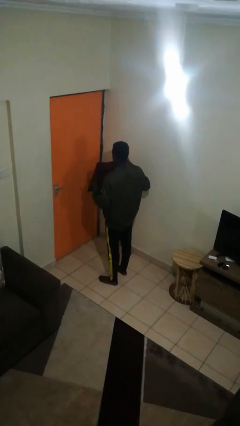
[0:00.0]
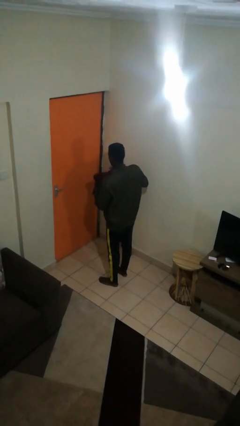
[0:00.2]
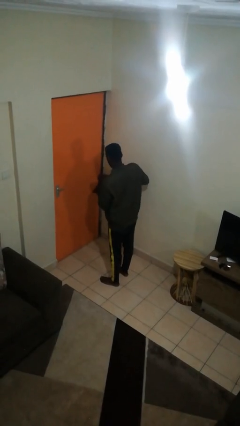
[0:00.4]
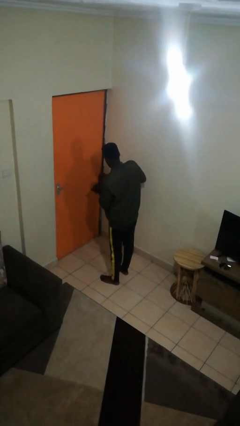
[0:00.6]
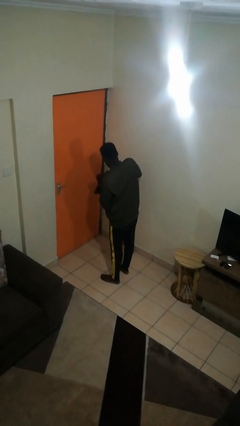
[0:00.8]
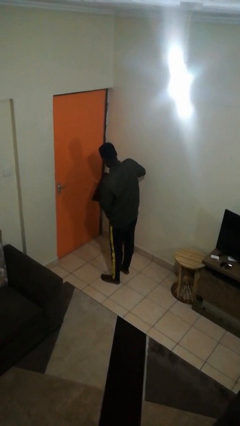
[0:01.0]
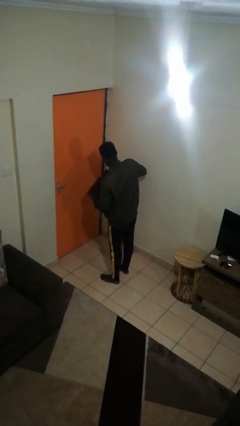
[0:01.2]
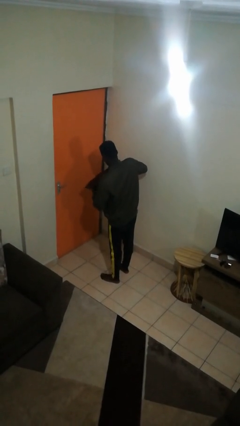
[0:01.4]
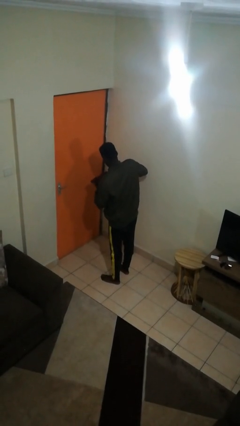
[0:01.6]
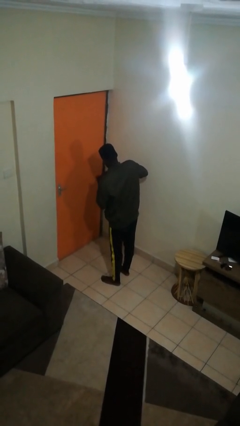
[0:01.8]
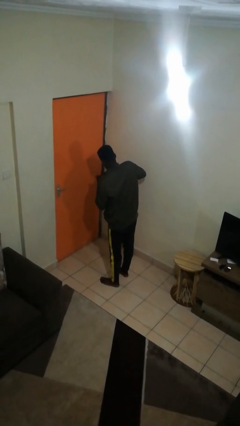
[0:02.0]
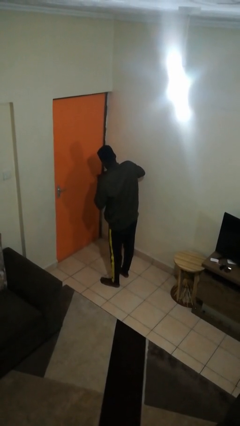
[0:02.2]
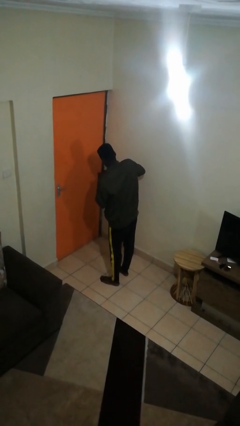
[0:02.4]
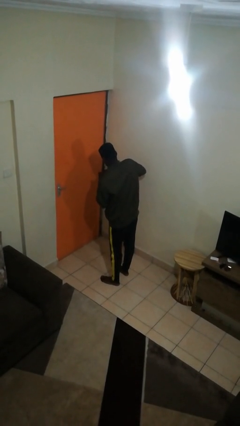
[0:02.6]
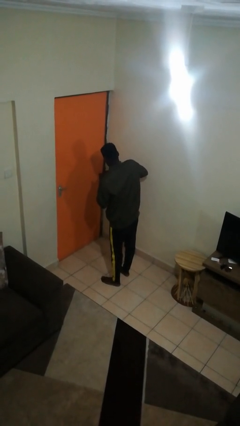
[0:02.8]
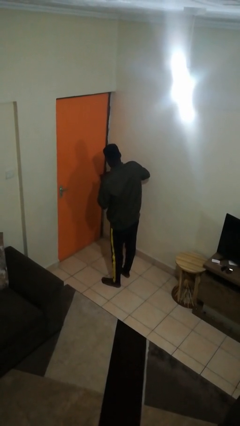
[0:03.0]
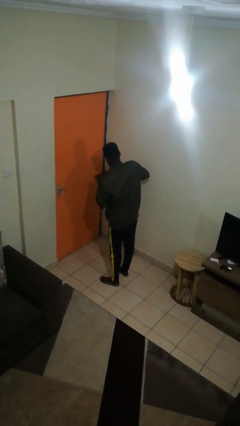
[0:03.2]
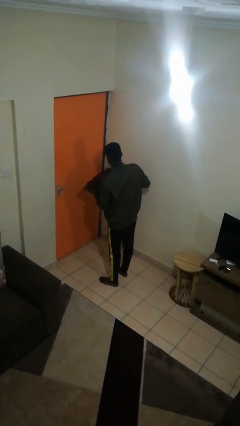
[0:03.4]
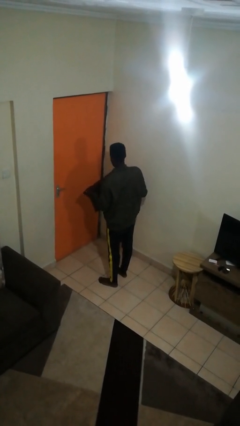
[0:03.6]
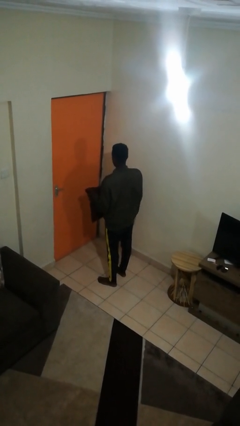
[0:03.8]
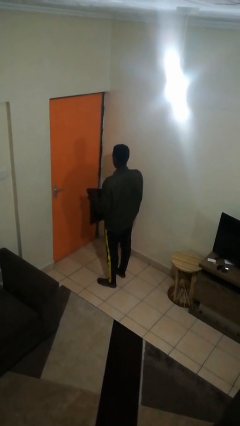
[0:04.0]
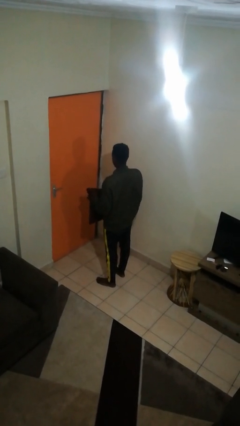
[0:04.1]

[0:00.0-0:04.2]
person squeezes object

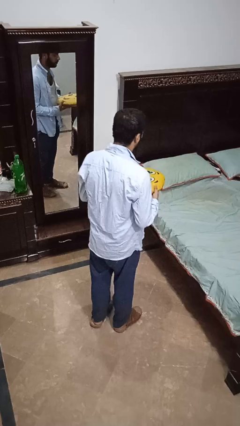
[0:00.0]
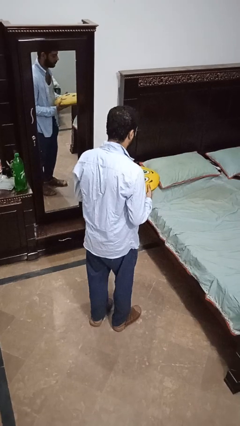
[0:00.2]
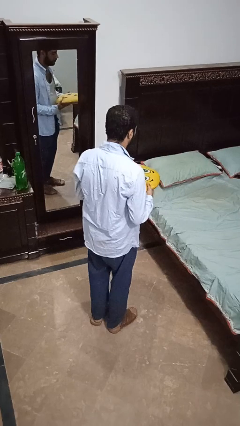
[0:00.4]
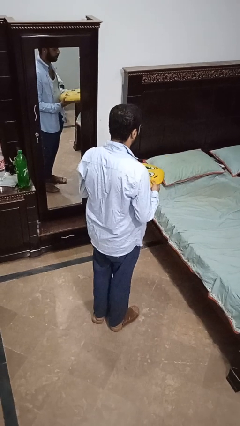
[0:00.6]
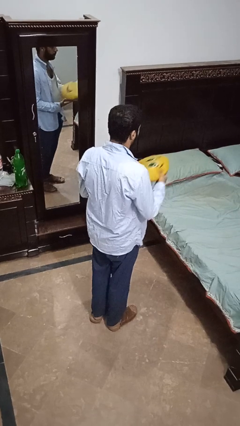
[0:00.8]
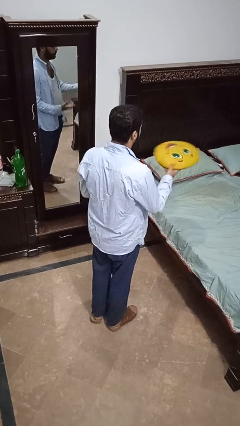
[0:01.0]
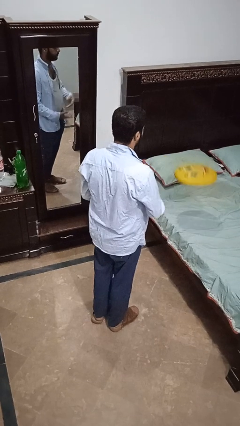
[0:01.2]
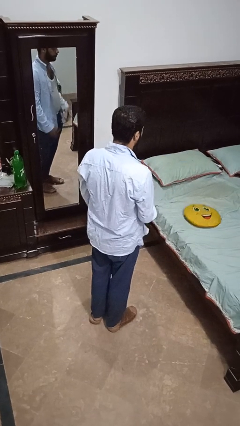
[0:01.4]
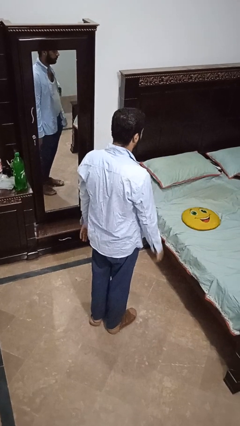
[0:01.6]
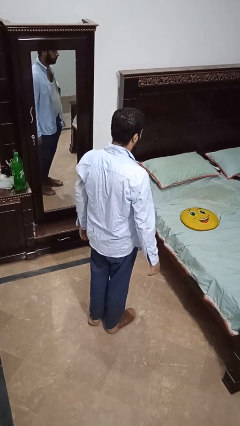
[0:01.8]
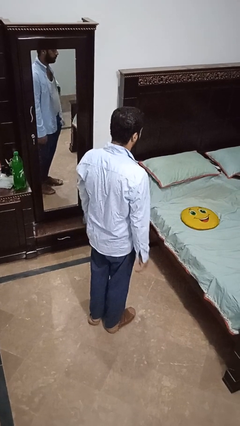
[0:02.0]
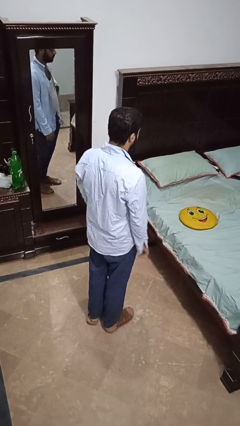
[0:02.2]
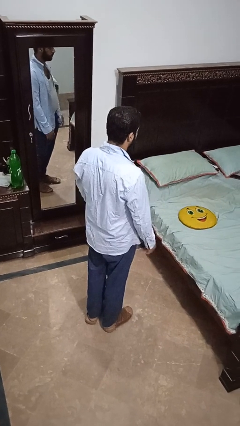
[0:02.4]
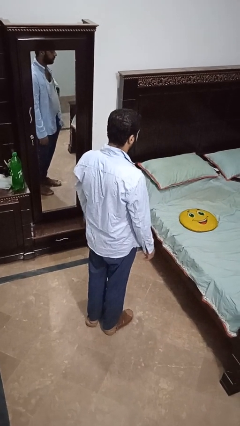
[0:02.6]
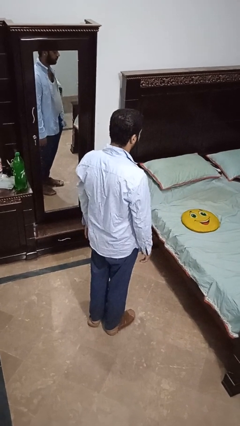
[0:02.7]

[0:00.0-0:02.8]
person throws object on bed

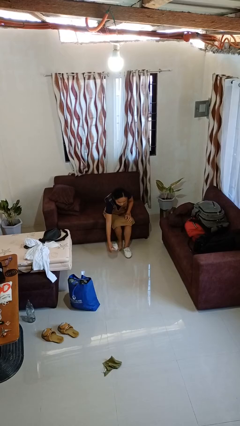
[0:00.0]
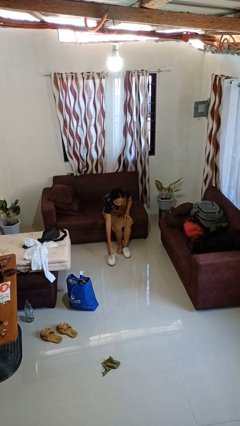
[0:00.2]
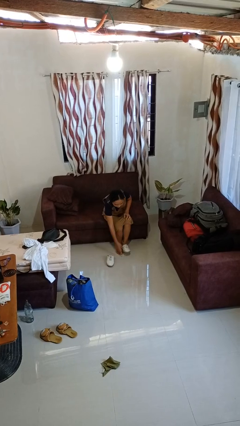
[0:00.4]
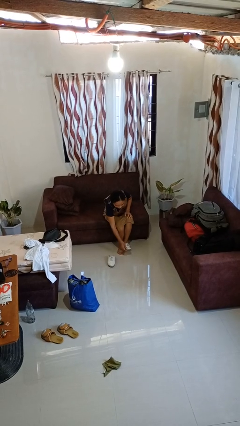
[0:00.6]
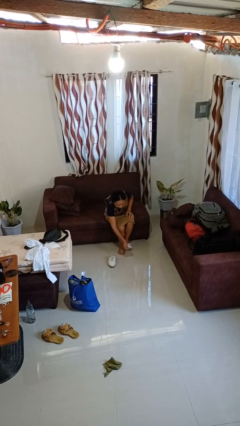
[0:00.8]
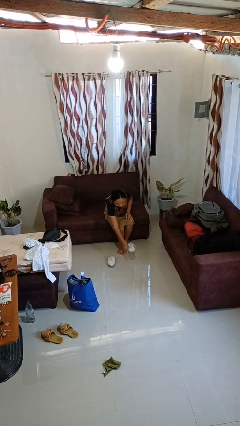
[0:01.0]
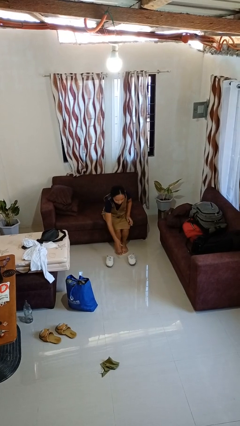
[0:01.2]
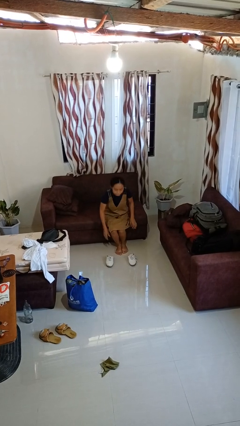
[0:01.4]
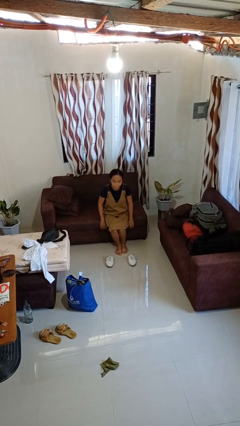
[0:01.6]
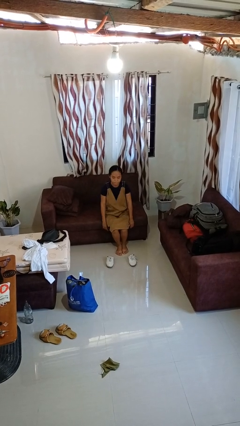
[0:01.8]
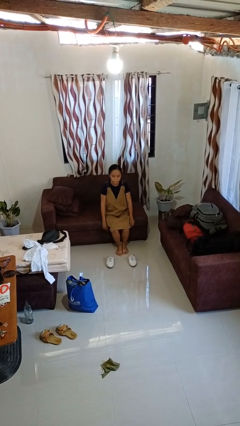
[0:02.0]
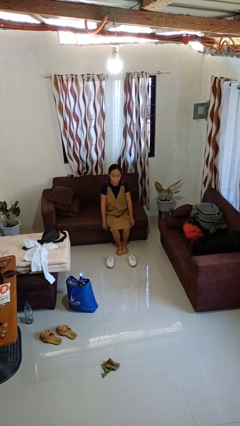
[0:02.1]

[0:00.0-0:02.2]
person takes off shoes

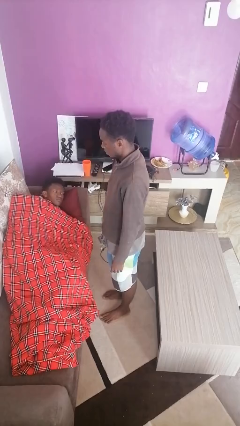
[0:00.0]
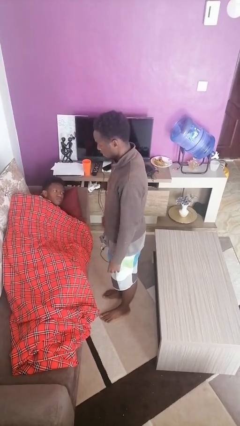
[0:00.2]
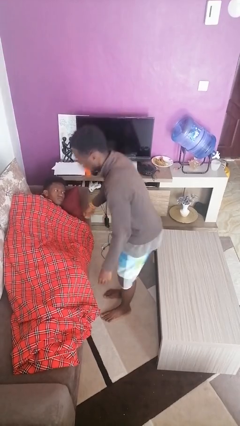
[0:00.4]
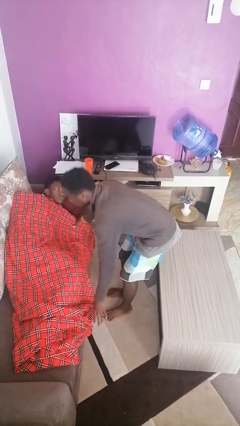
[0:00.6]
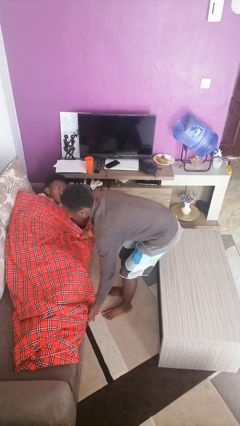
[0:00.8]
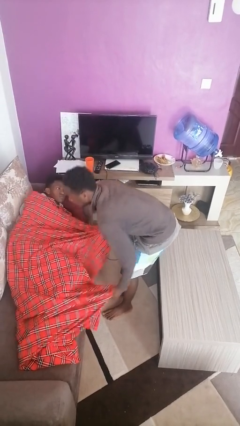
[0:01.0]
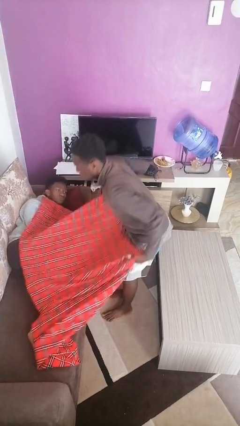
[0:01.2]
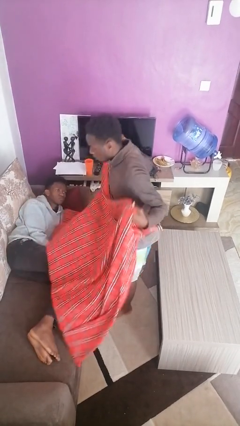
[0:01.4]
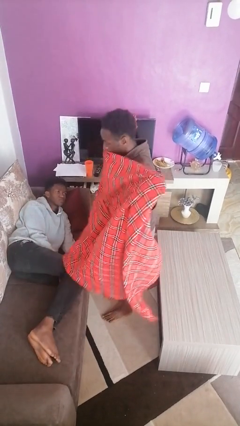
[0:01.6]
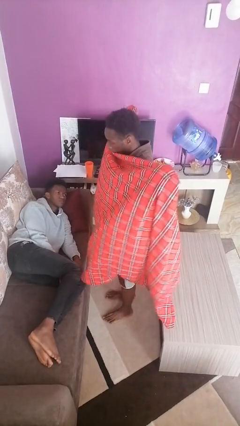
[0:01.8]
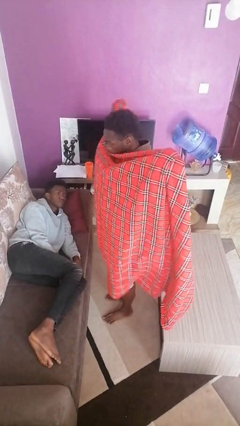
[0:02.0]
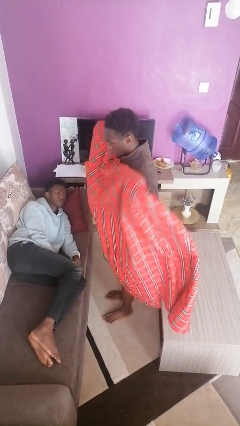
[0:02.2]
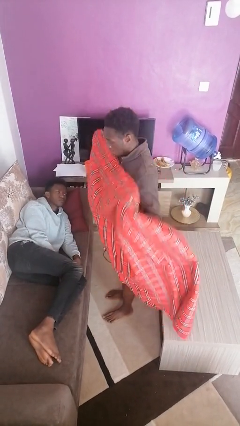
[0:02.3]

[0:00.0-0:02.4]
person uncovers friend with blanket

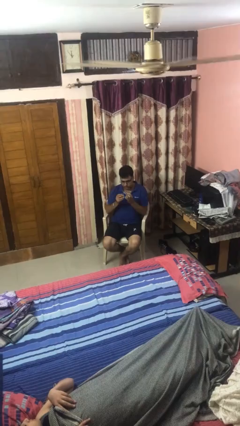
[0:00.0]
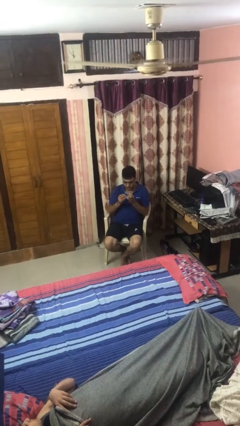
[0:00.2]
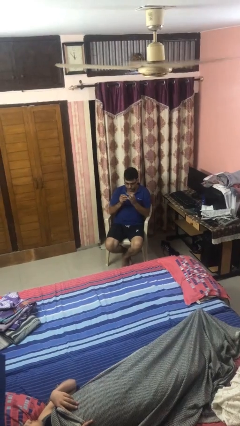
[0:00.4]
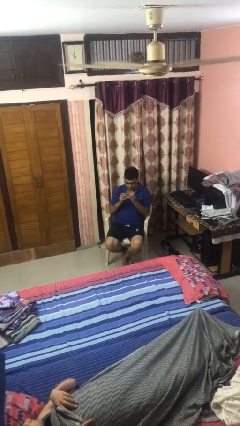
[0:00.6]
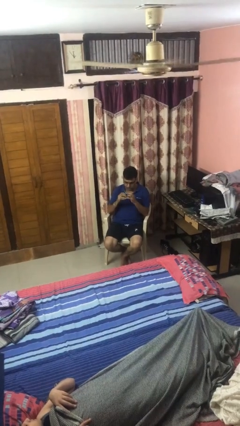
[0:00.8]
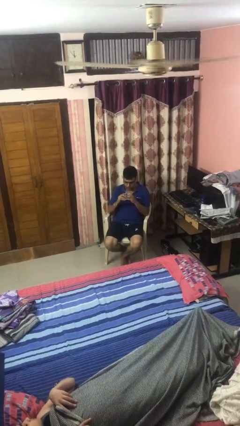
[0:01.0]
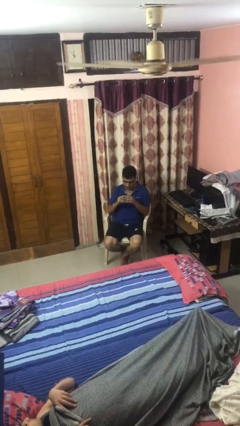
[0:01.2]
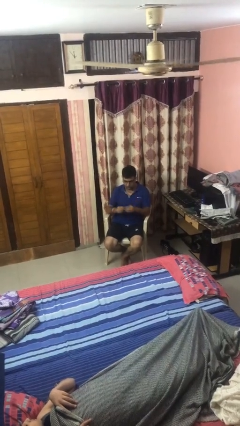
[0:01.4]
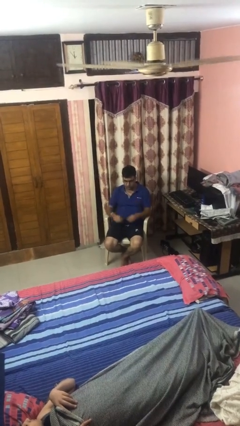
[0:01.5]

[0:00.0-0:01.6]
person clips fingernails

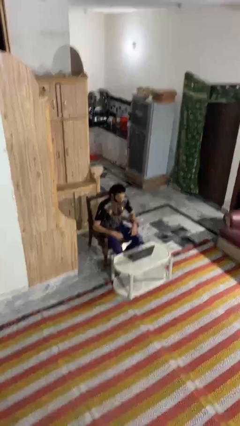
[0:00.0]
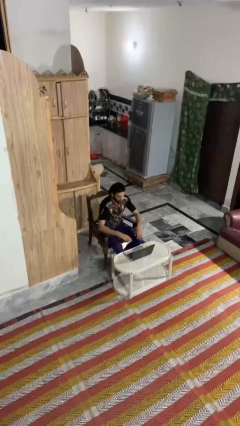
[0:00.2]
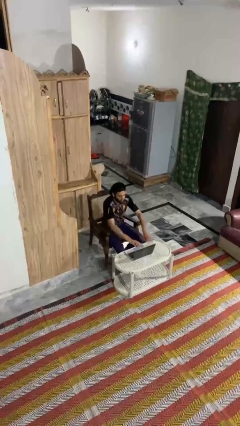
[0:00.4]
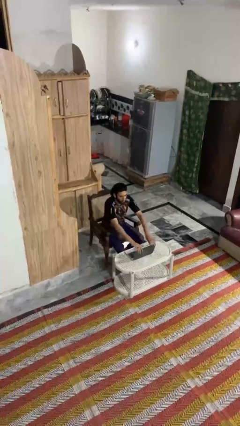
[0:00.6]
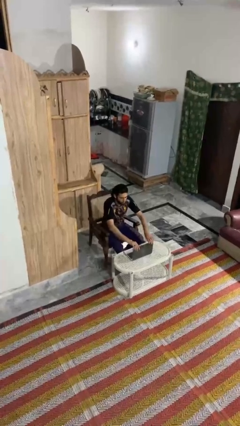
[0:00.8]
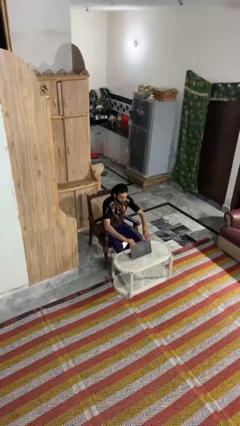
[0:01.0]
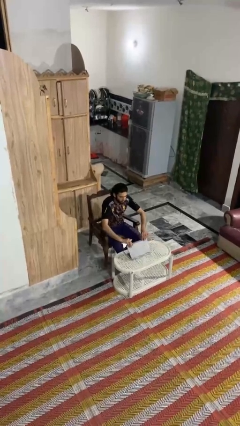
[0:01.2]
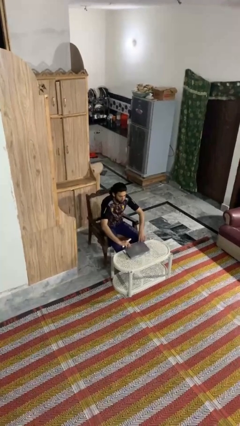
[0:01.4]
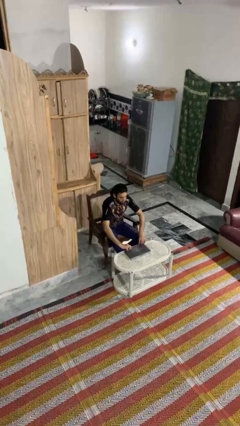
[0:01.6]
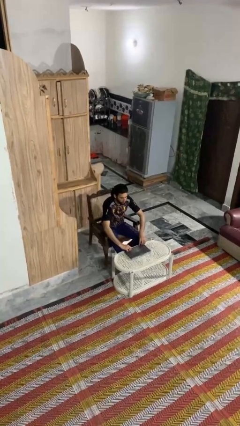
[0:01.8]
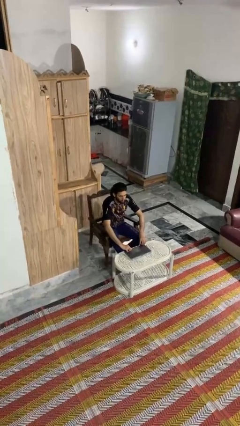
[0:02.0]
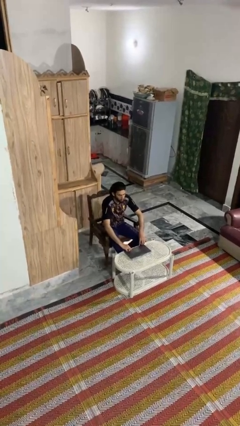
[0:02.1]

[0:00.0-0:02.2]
person closes laptop

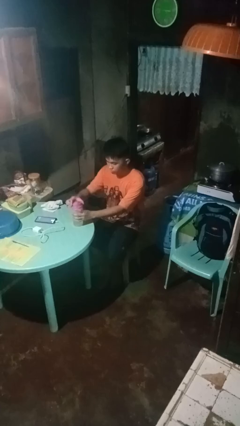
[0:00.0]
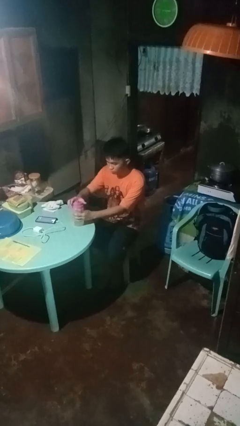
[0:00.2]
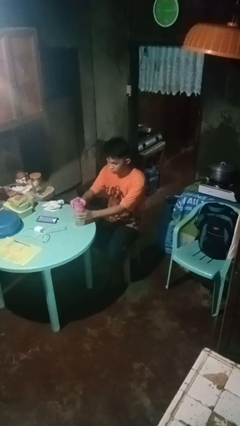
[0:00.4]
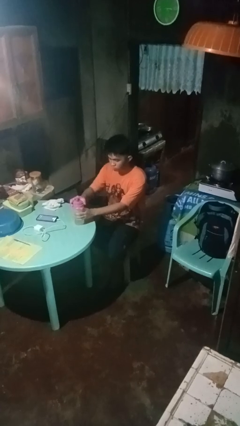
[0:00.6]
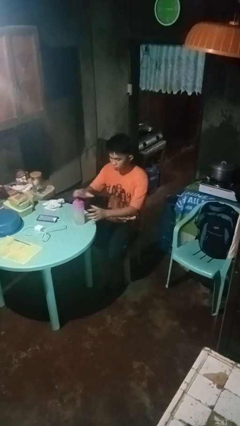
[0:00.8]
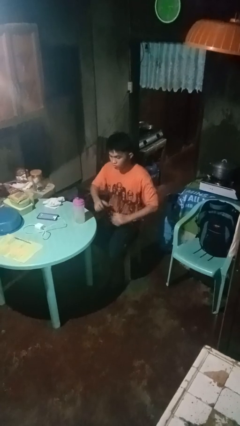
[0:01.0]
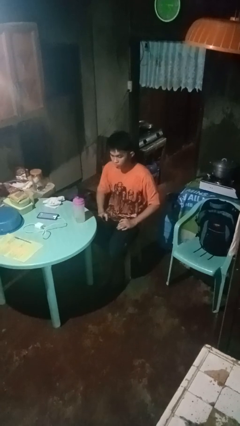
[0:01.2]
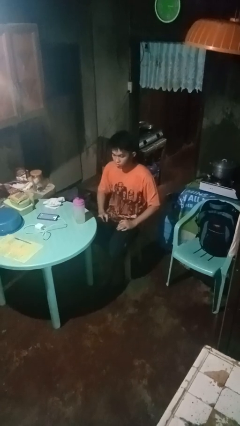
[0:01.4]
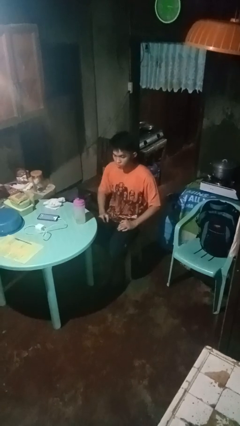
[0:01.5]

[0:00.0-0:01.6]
person screws lid to bottle
